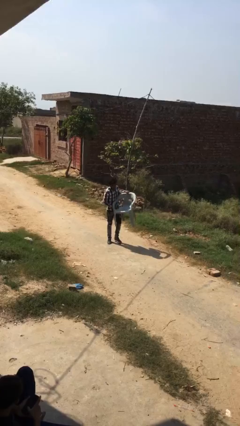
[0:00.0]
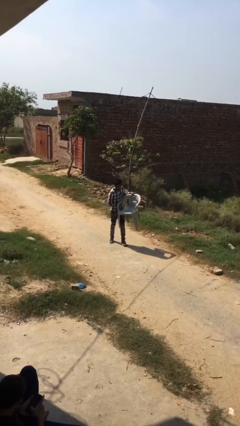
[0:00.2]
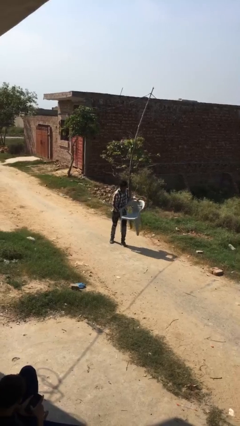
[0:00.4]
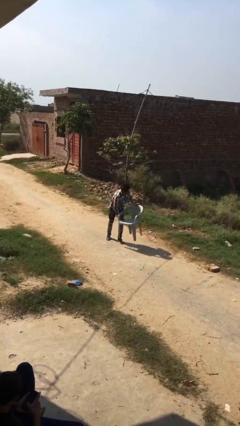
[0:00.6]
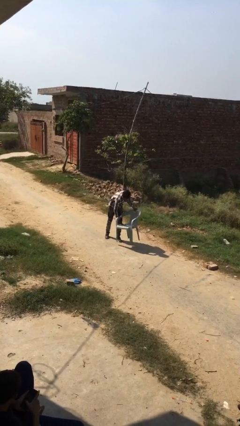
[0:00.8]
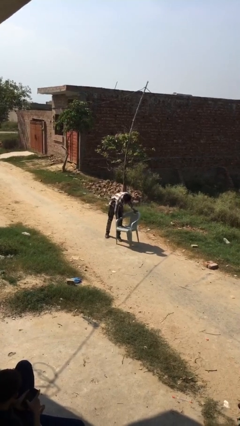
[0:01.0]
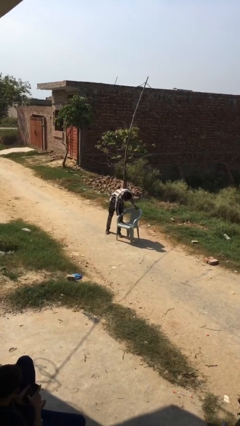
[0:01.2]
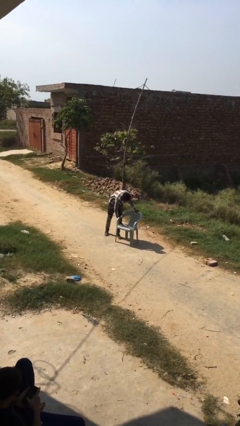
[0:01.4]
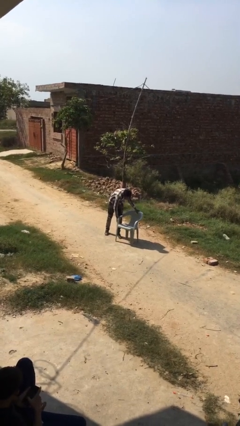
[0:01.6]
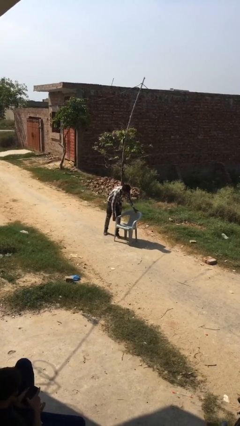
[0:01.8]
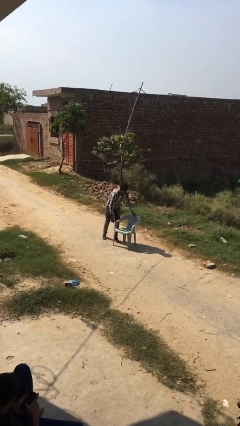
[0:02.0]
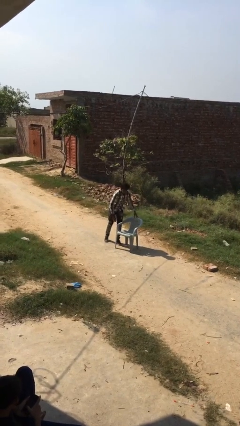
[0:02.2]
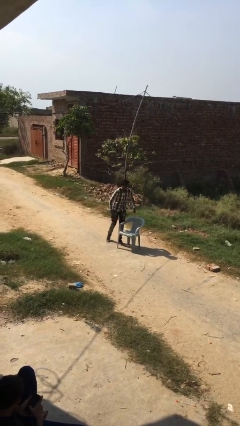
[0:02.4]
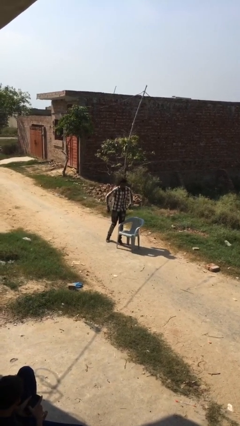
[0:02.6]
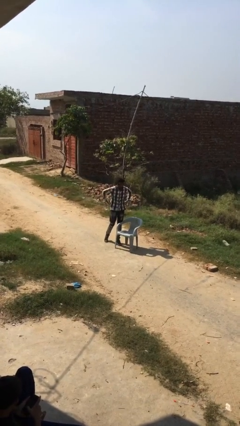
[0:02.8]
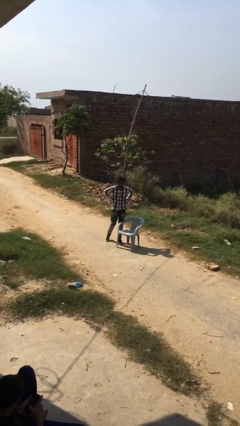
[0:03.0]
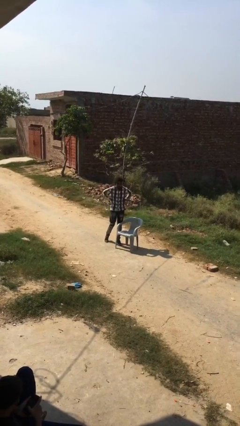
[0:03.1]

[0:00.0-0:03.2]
person puts down object on floor

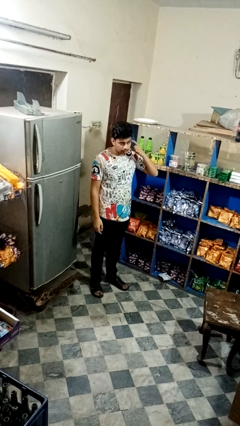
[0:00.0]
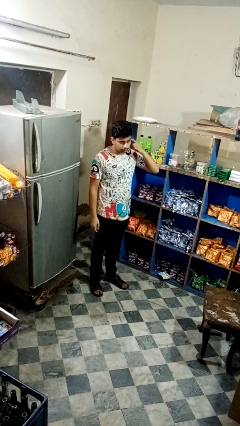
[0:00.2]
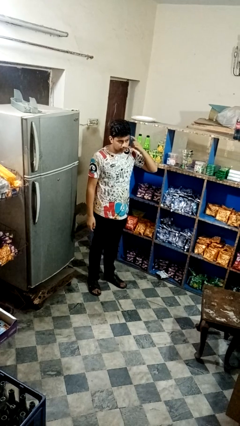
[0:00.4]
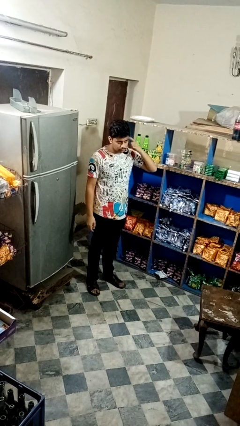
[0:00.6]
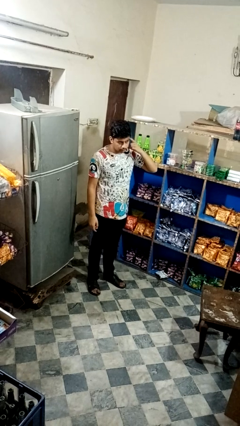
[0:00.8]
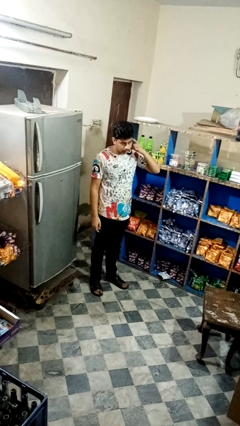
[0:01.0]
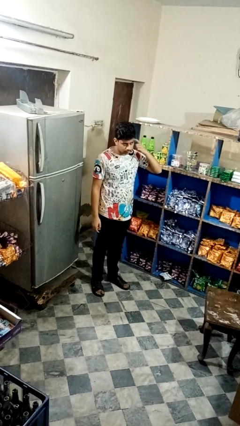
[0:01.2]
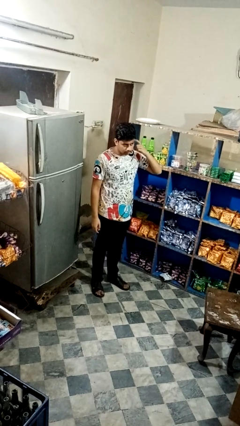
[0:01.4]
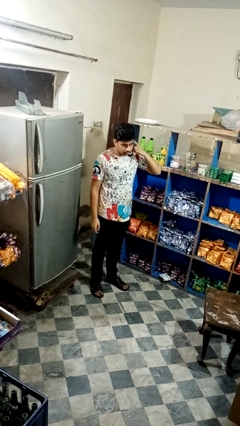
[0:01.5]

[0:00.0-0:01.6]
person gestures listen closely

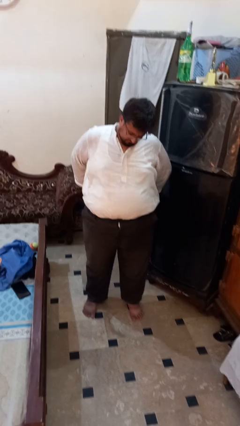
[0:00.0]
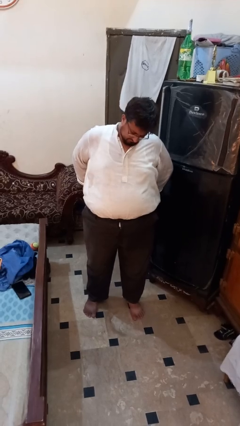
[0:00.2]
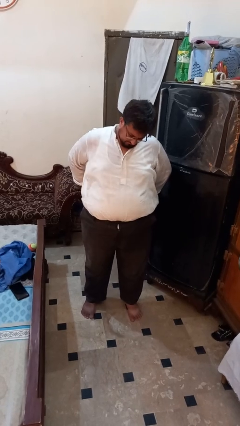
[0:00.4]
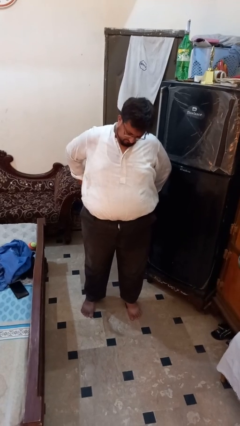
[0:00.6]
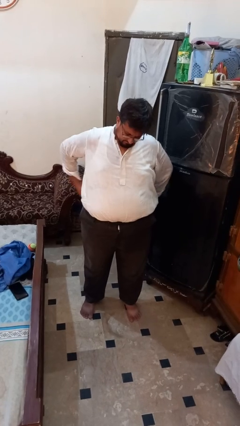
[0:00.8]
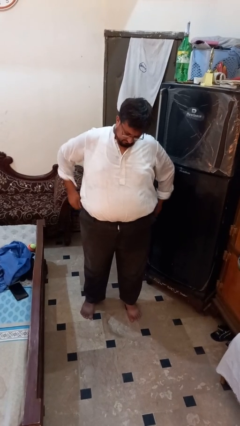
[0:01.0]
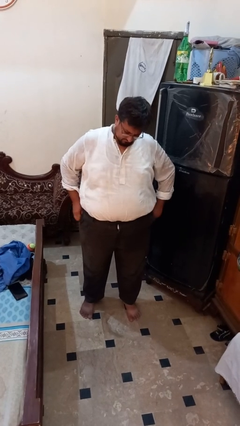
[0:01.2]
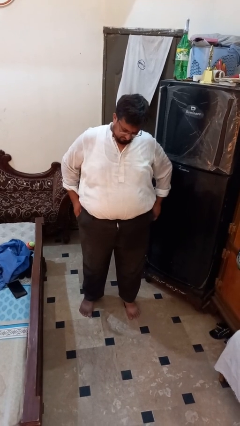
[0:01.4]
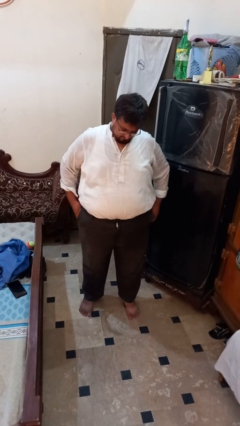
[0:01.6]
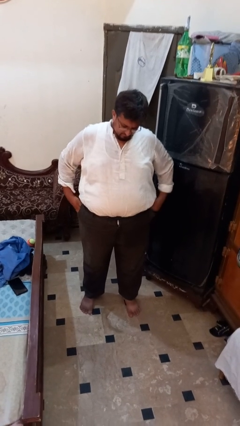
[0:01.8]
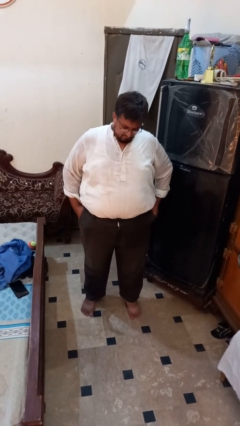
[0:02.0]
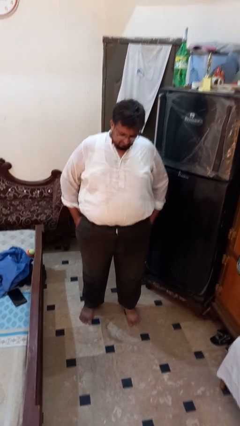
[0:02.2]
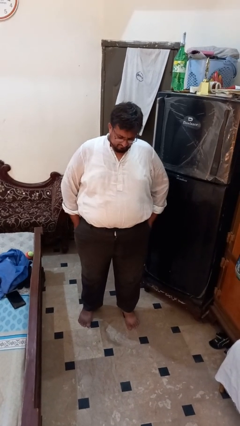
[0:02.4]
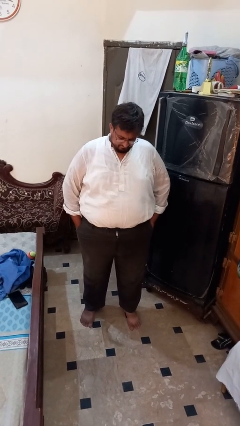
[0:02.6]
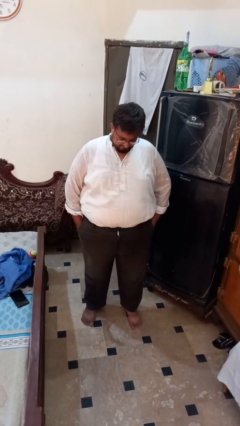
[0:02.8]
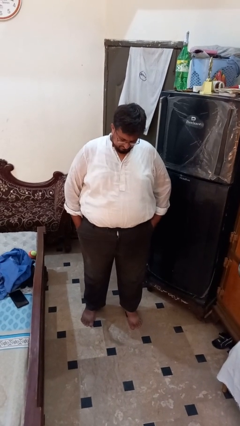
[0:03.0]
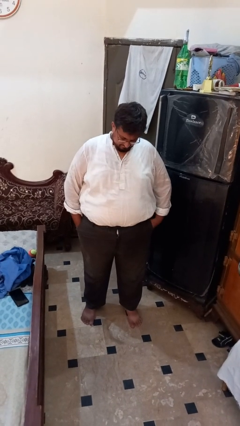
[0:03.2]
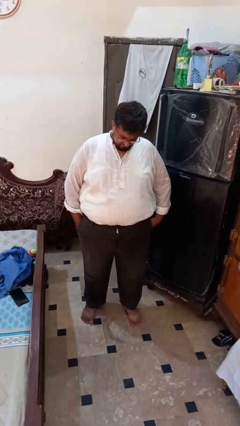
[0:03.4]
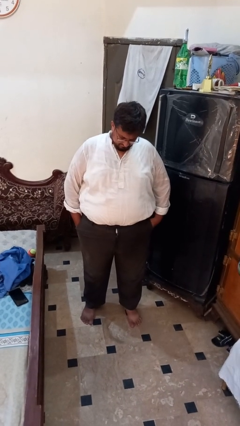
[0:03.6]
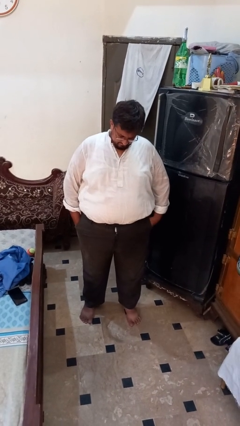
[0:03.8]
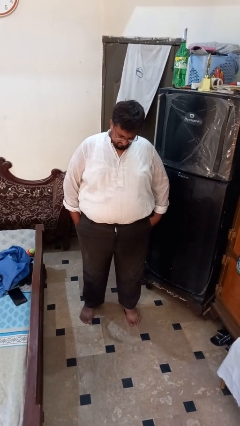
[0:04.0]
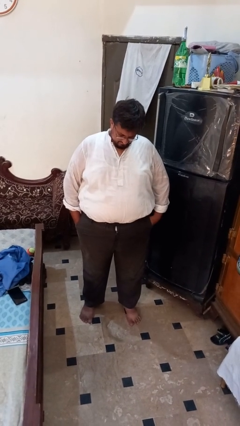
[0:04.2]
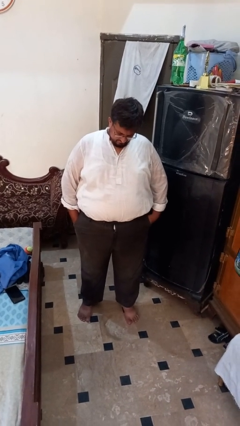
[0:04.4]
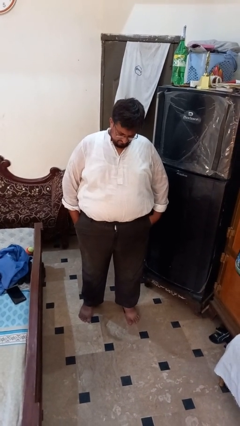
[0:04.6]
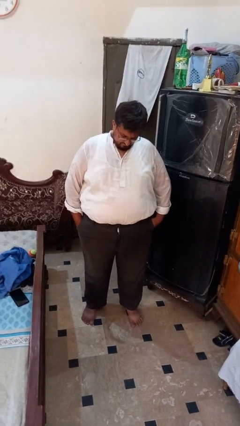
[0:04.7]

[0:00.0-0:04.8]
person puts hands in back pockets

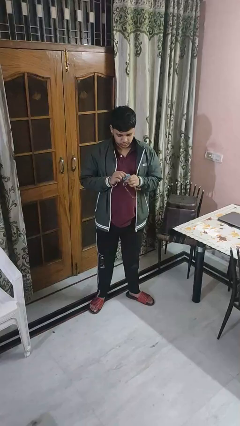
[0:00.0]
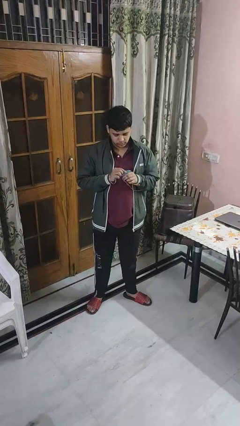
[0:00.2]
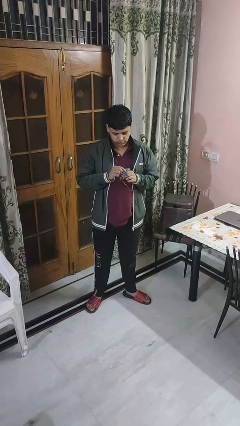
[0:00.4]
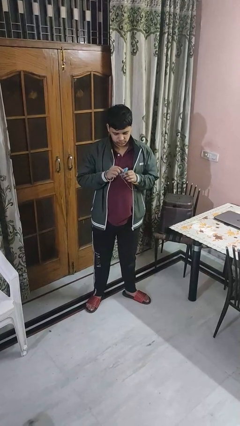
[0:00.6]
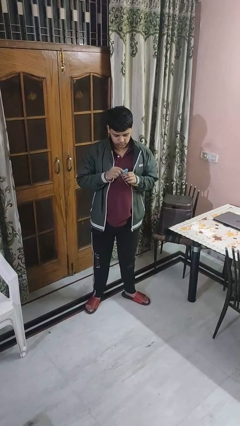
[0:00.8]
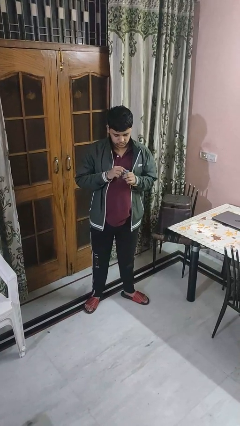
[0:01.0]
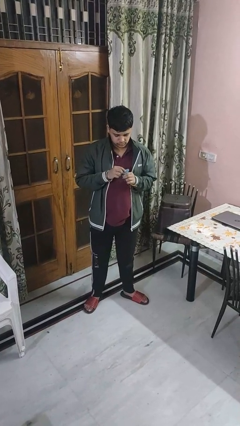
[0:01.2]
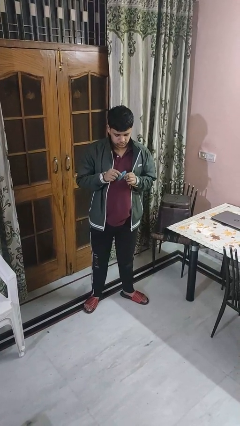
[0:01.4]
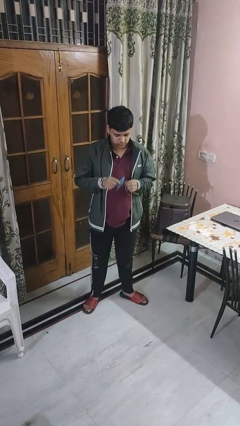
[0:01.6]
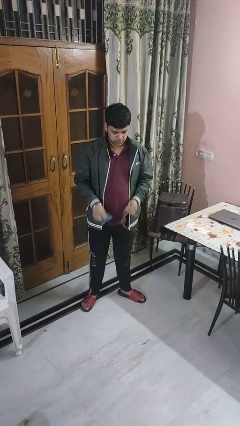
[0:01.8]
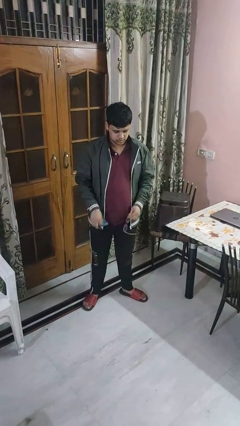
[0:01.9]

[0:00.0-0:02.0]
person cleans eyeglasses

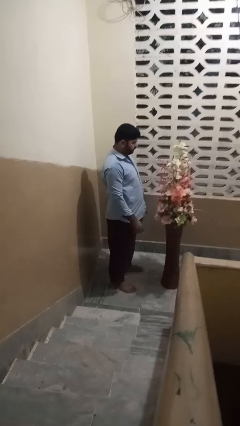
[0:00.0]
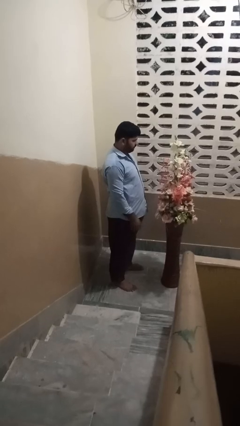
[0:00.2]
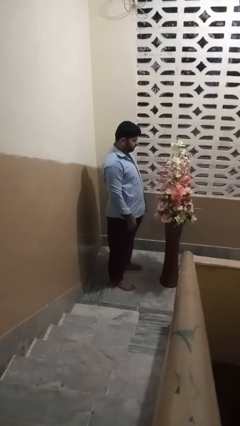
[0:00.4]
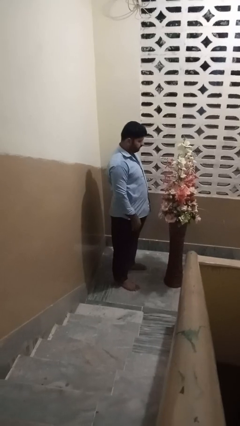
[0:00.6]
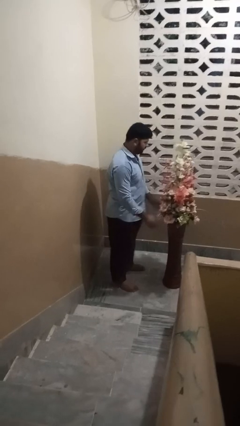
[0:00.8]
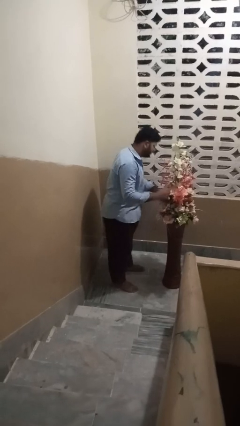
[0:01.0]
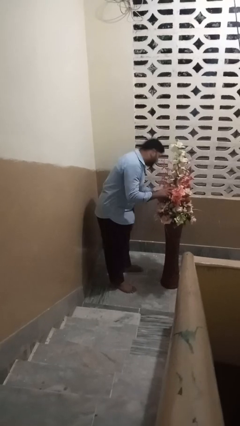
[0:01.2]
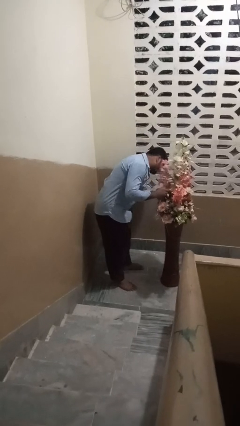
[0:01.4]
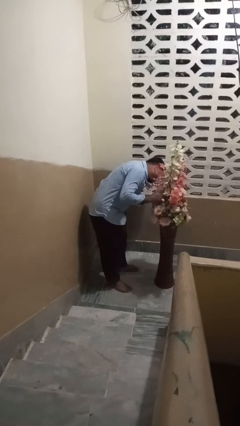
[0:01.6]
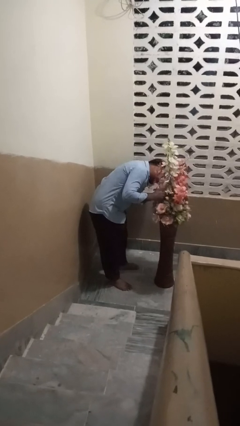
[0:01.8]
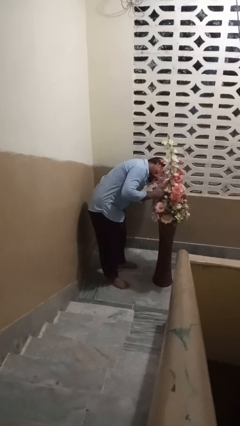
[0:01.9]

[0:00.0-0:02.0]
person arranges flowers in vase

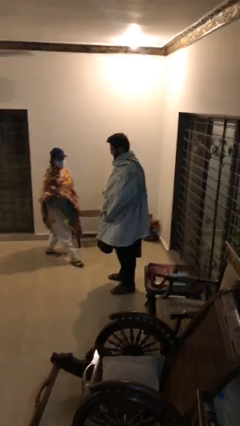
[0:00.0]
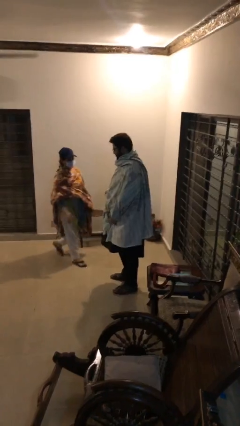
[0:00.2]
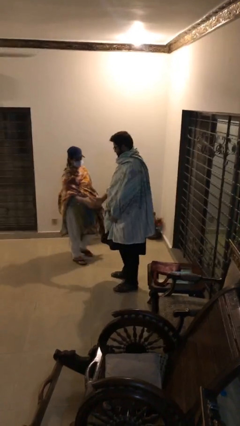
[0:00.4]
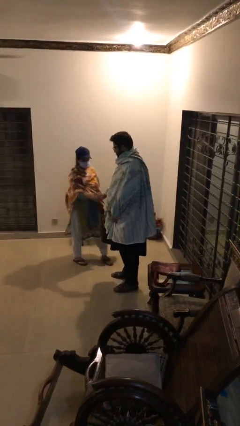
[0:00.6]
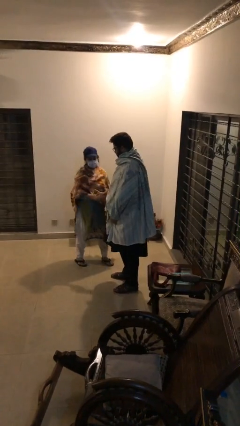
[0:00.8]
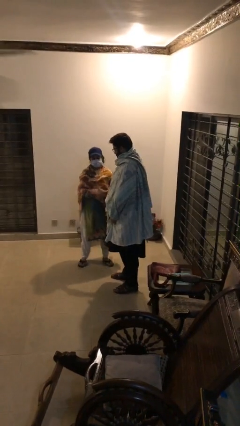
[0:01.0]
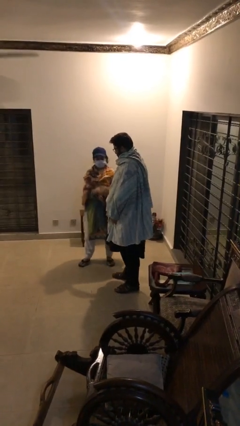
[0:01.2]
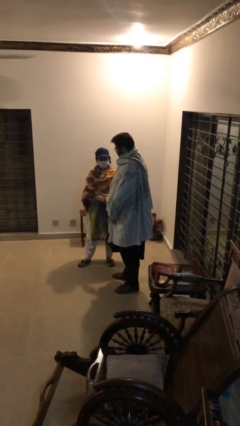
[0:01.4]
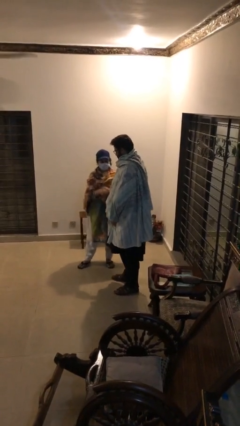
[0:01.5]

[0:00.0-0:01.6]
person shakes hand

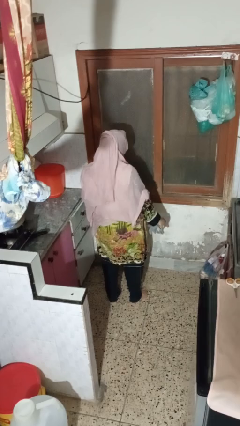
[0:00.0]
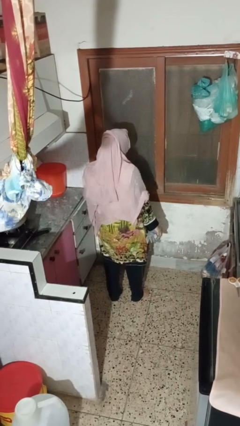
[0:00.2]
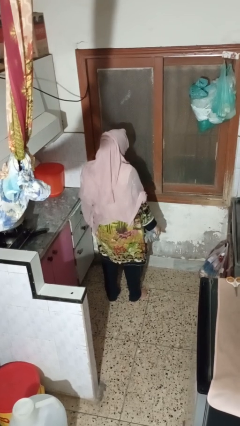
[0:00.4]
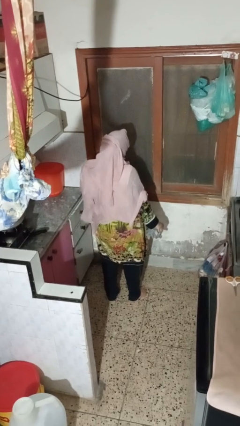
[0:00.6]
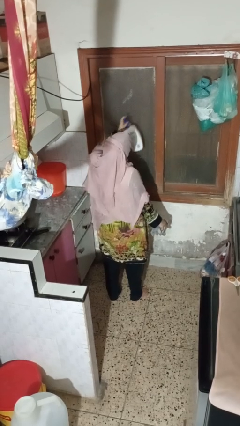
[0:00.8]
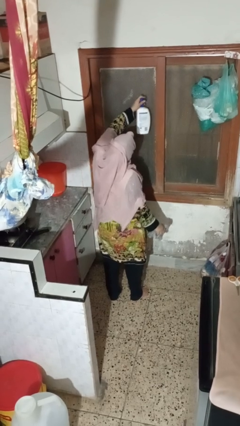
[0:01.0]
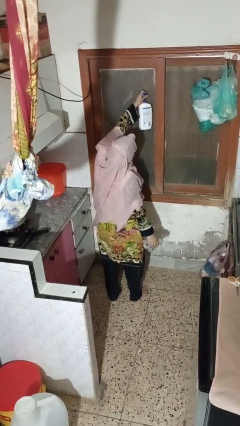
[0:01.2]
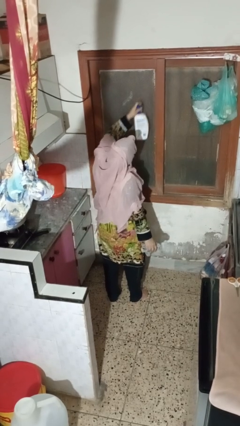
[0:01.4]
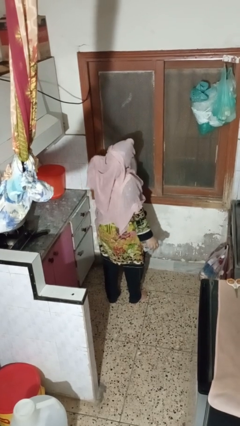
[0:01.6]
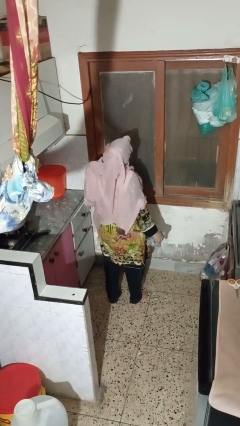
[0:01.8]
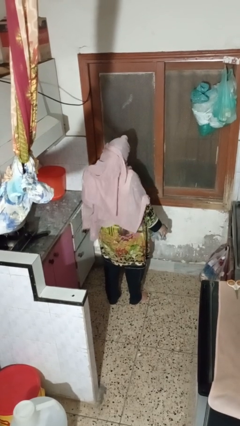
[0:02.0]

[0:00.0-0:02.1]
person sprays from bottle
